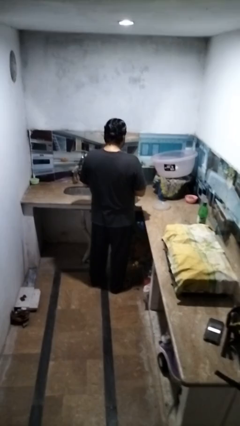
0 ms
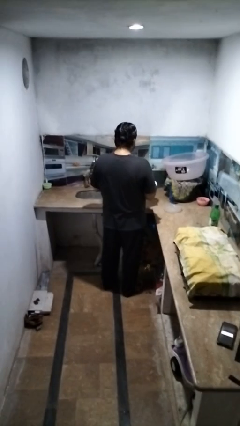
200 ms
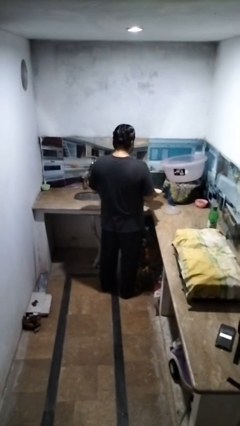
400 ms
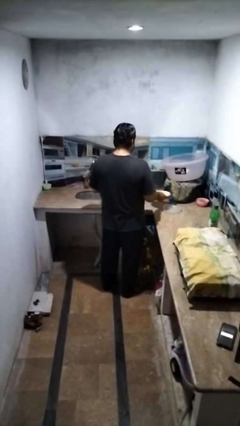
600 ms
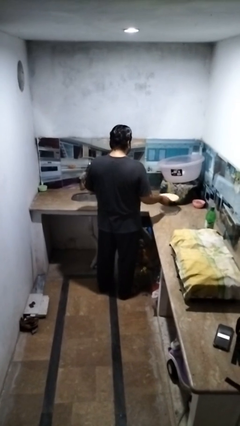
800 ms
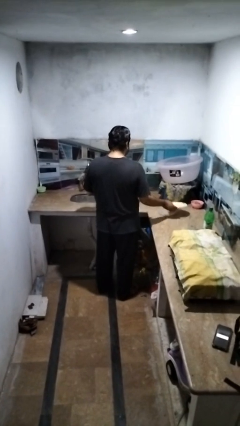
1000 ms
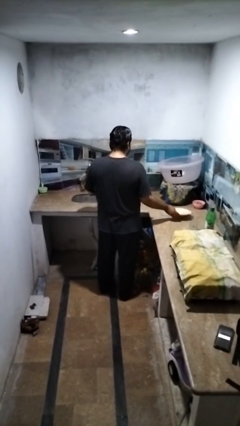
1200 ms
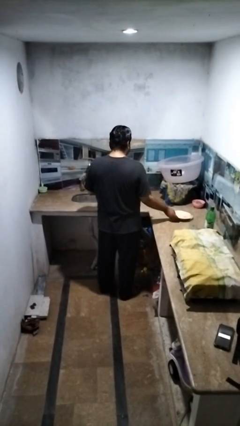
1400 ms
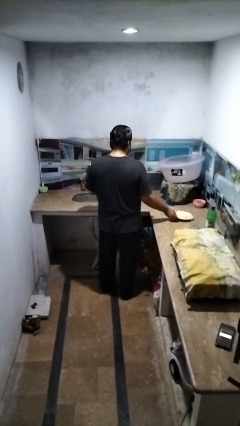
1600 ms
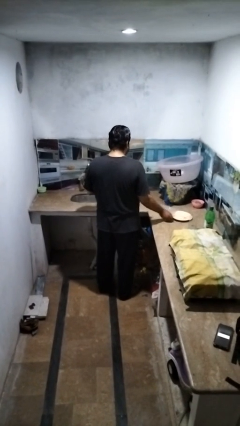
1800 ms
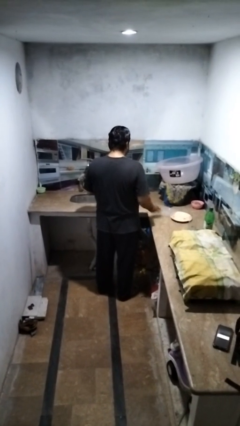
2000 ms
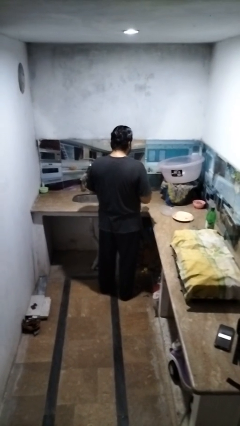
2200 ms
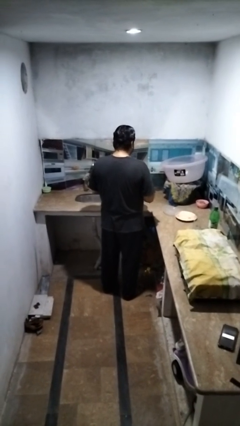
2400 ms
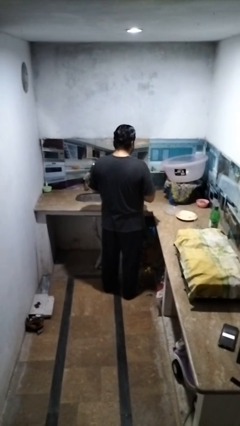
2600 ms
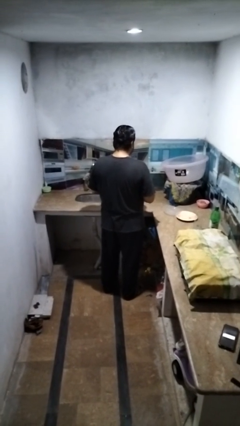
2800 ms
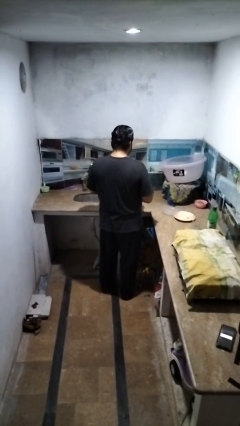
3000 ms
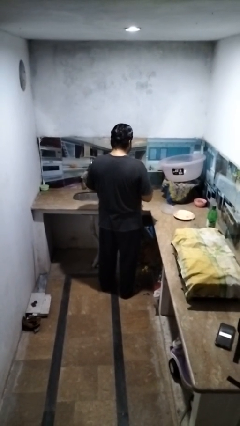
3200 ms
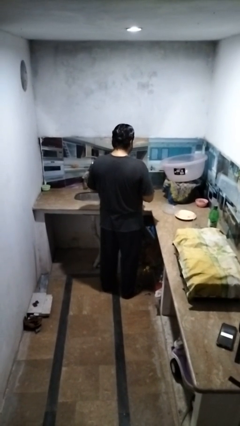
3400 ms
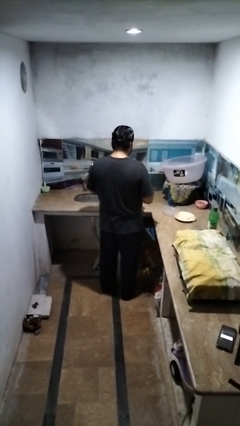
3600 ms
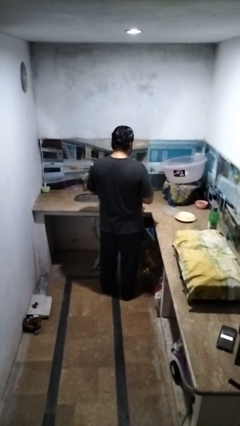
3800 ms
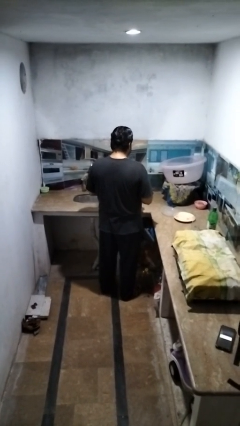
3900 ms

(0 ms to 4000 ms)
person sets table

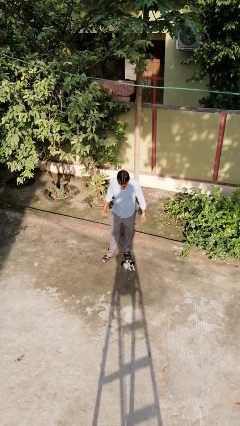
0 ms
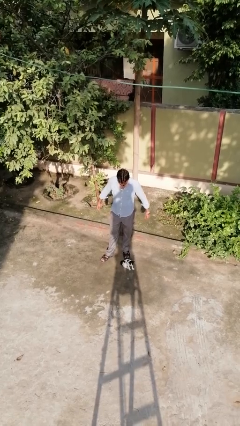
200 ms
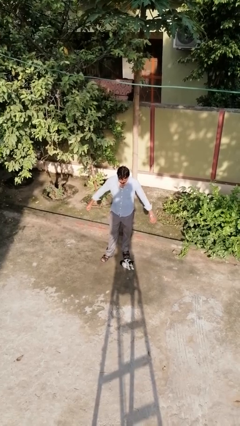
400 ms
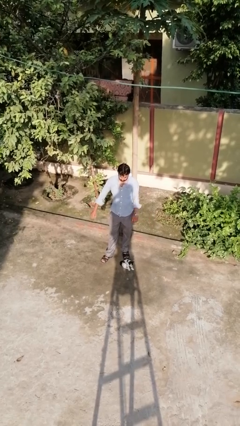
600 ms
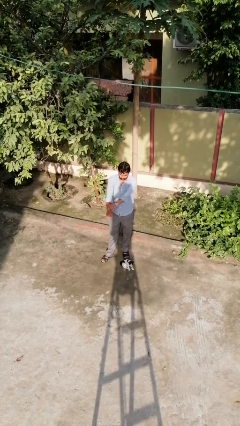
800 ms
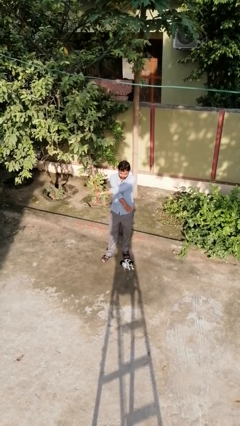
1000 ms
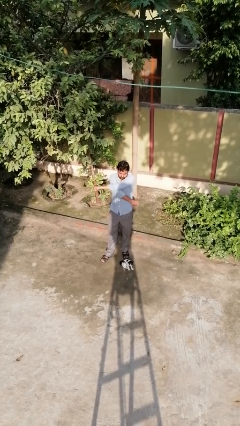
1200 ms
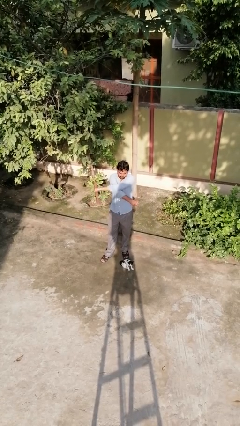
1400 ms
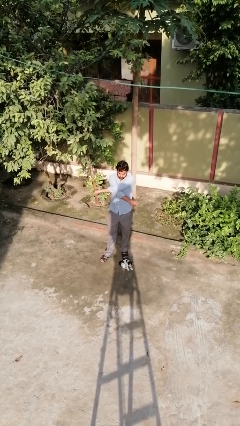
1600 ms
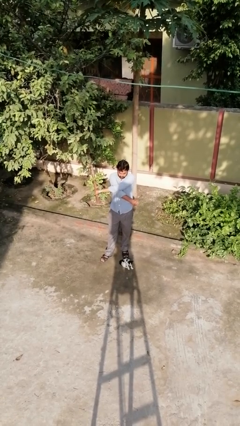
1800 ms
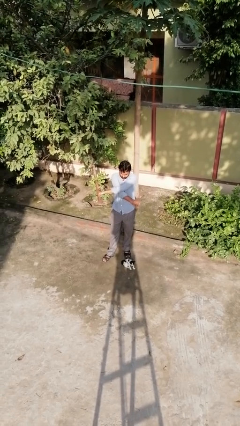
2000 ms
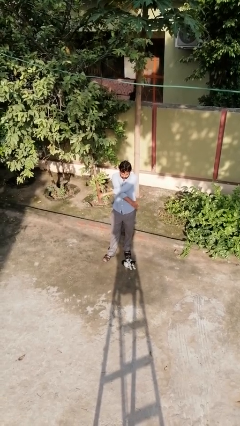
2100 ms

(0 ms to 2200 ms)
person crosses arms

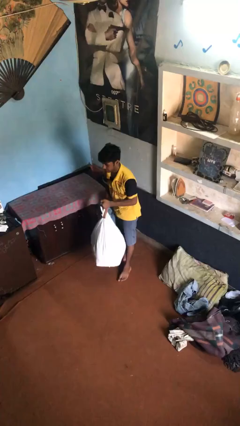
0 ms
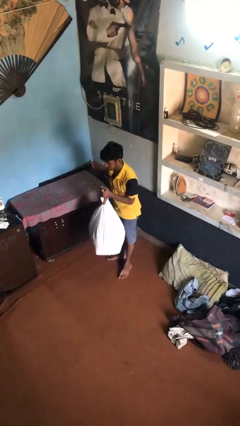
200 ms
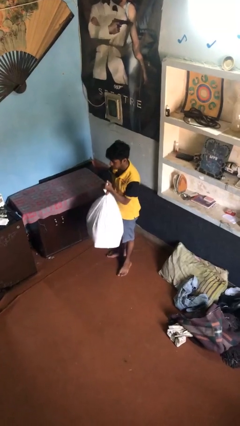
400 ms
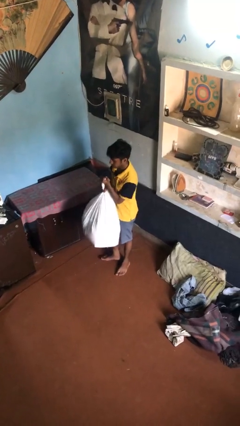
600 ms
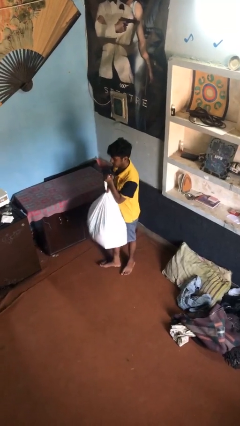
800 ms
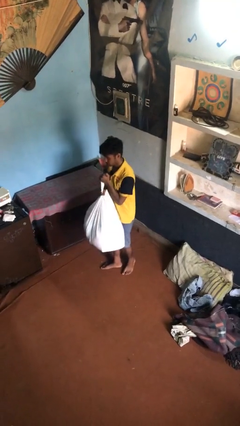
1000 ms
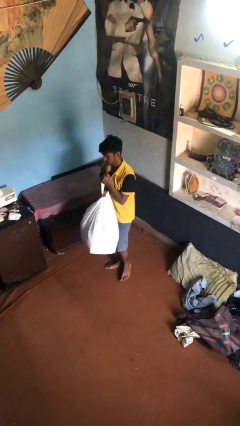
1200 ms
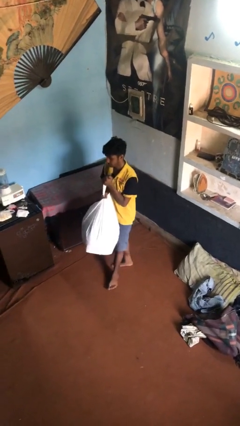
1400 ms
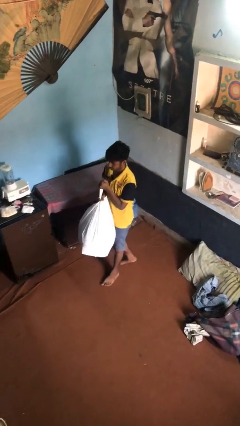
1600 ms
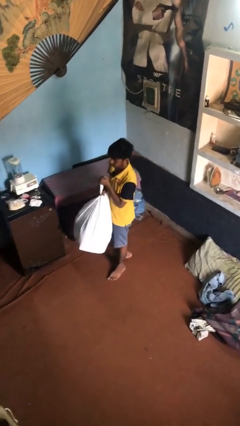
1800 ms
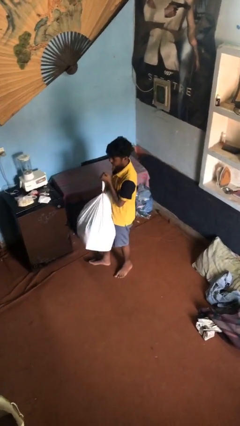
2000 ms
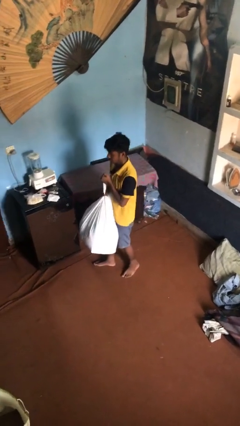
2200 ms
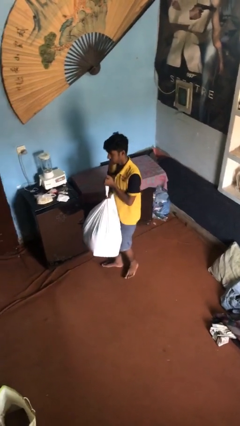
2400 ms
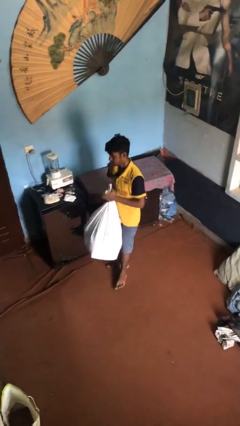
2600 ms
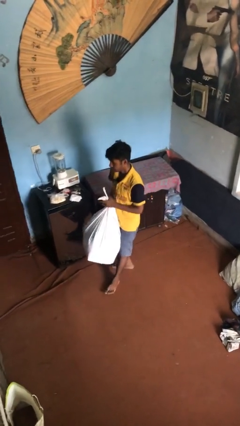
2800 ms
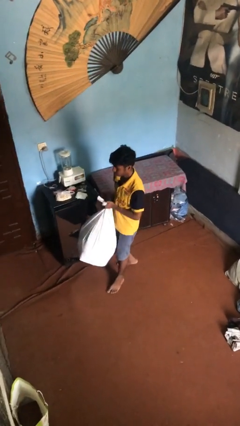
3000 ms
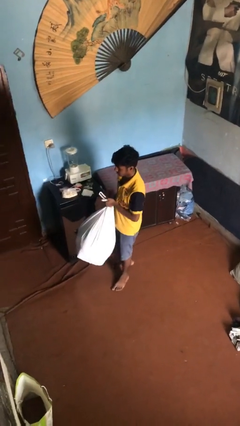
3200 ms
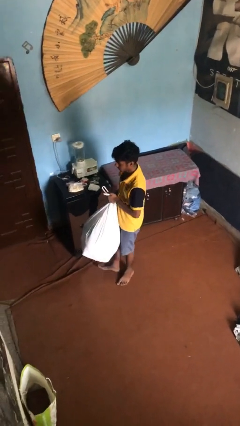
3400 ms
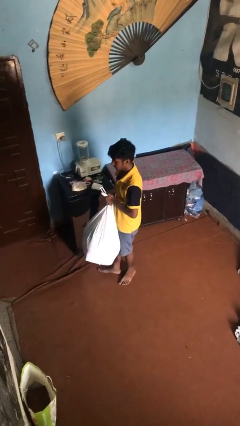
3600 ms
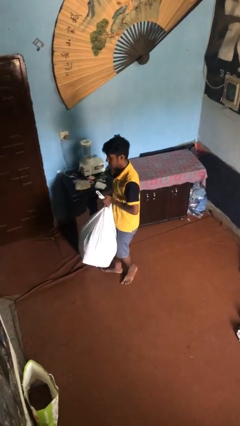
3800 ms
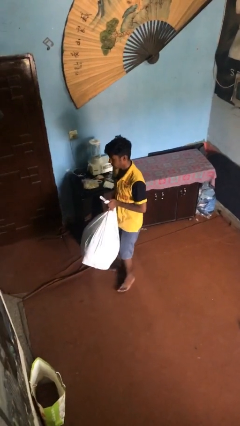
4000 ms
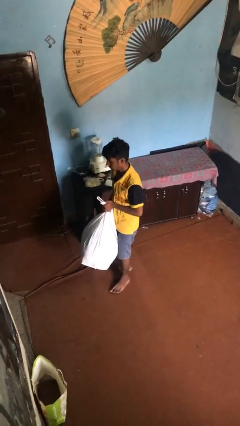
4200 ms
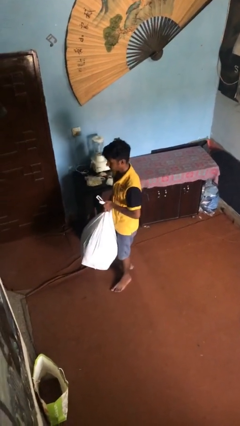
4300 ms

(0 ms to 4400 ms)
person carries heavy object

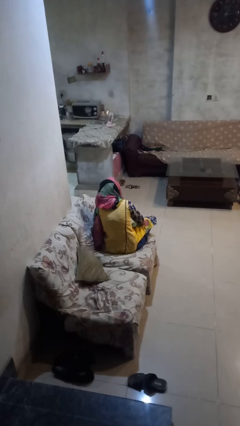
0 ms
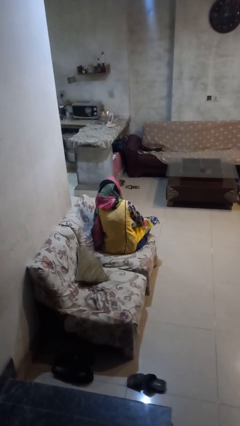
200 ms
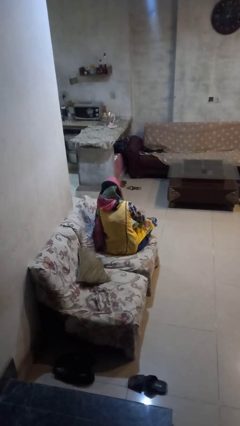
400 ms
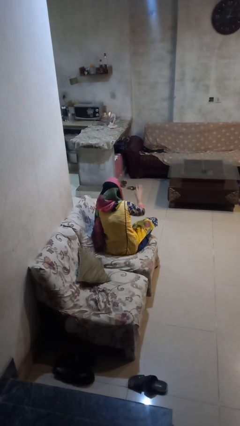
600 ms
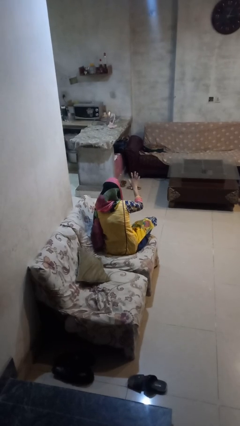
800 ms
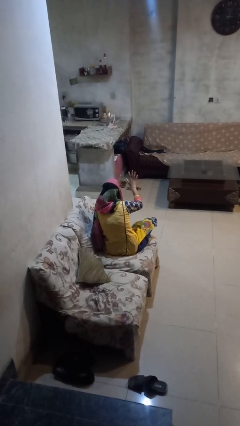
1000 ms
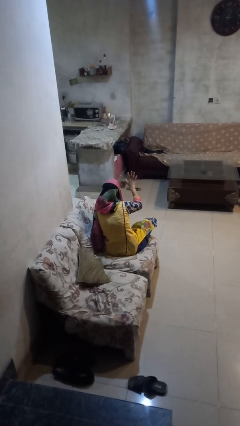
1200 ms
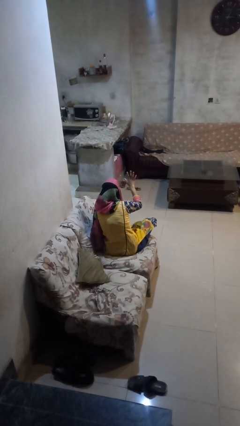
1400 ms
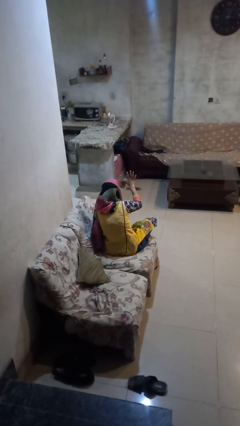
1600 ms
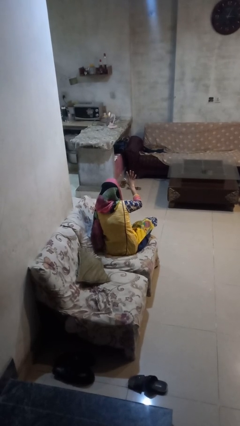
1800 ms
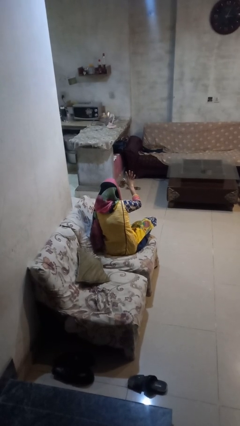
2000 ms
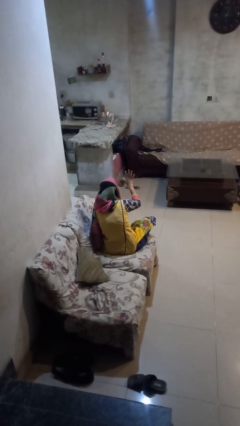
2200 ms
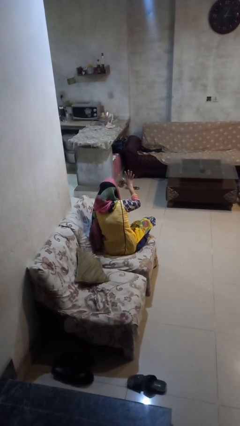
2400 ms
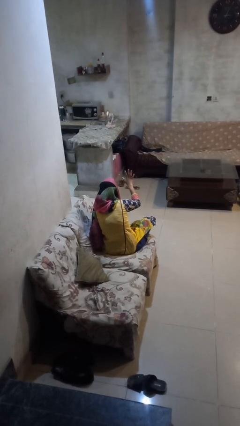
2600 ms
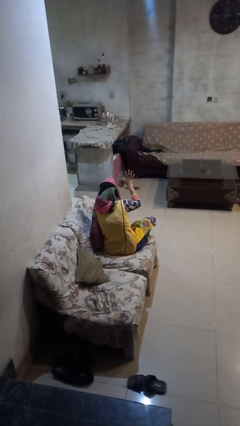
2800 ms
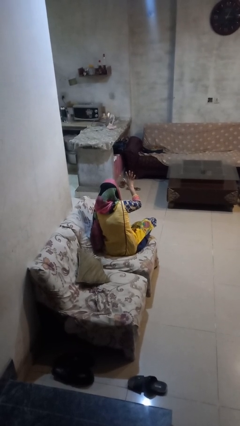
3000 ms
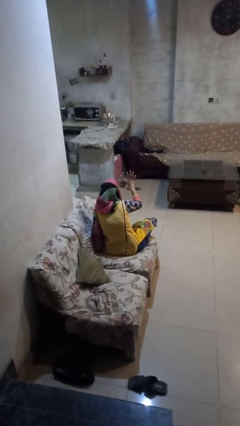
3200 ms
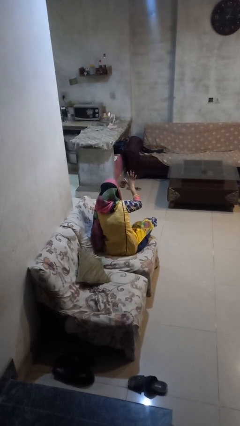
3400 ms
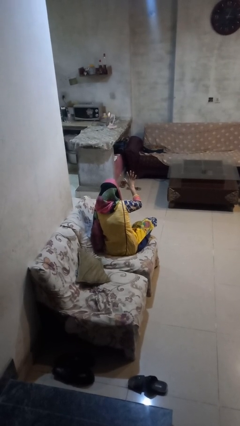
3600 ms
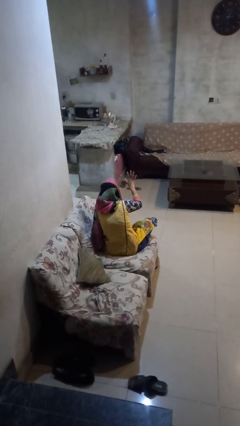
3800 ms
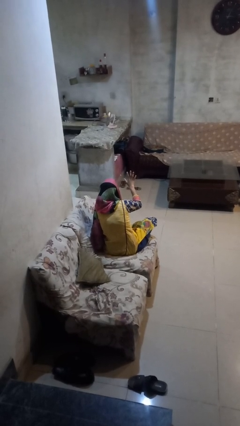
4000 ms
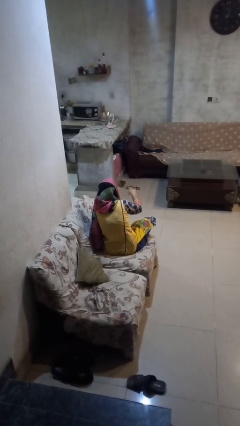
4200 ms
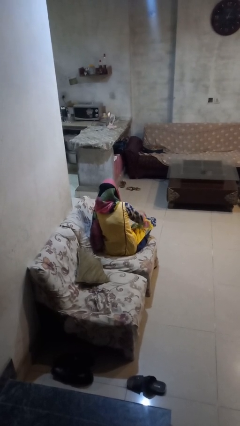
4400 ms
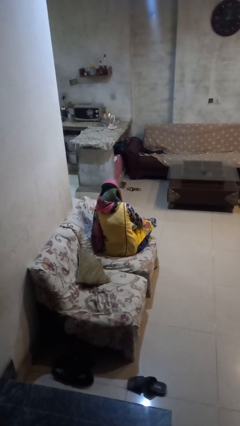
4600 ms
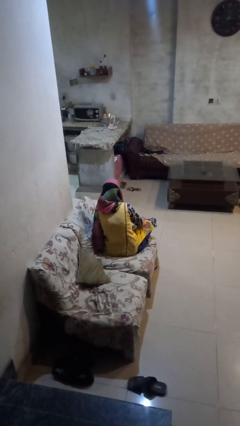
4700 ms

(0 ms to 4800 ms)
person gestures number five

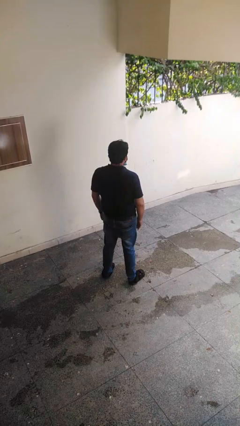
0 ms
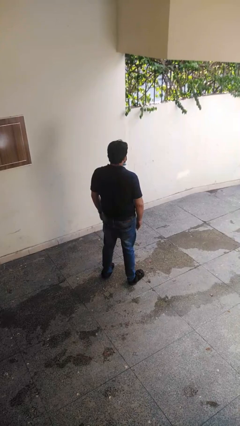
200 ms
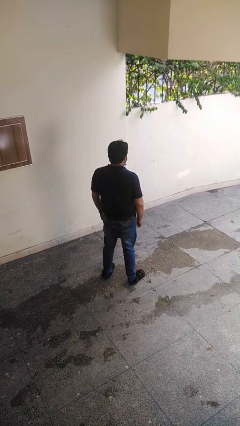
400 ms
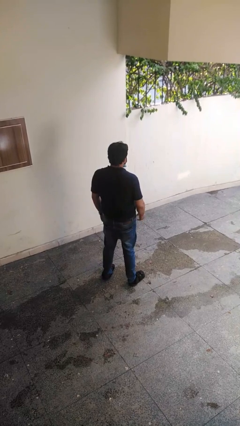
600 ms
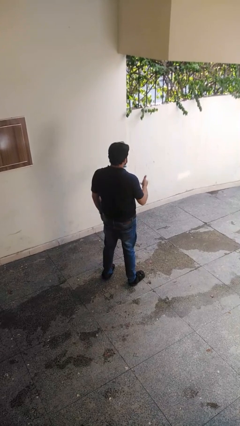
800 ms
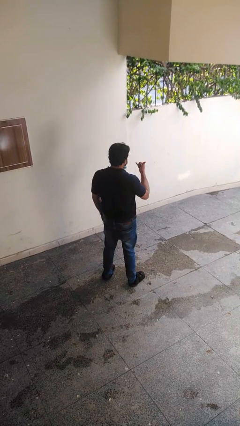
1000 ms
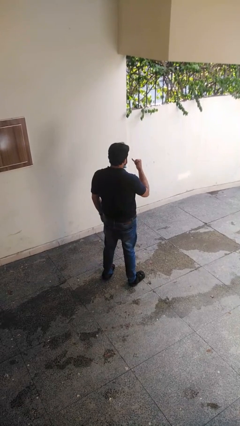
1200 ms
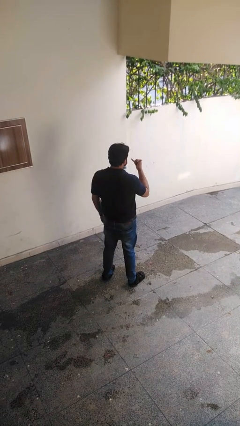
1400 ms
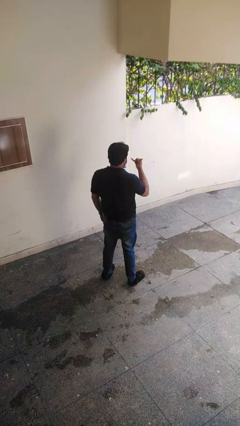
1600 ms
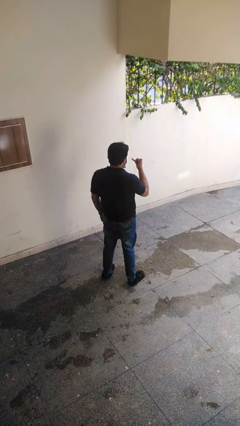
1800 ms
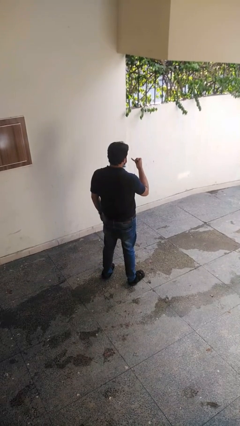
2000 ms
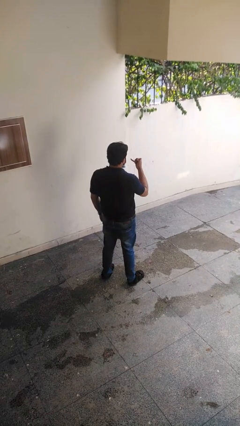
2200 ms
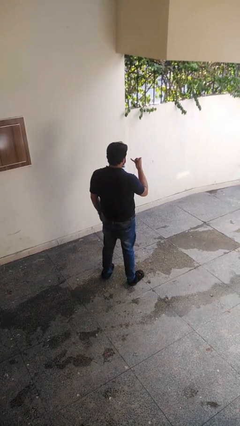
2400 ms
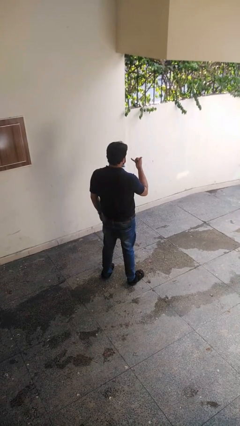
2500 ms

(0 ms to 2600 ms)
person gestures hang loose
